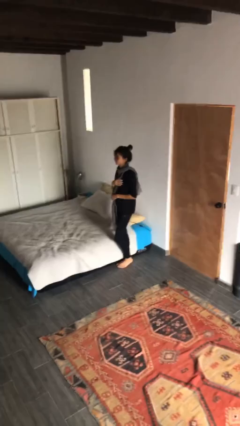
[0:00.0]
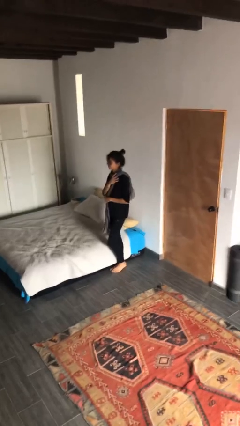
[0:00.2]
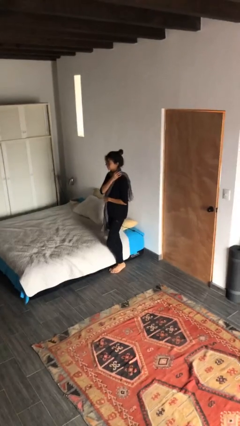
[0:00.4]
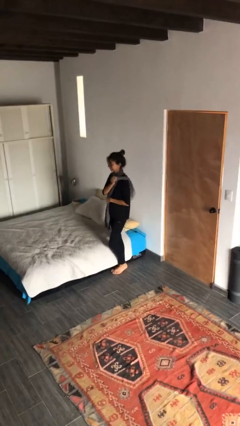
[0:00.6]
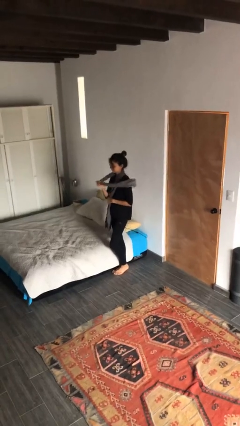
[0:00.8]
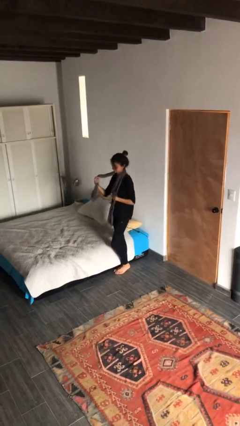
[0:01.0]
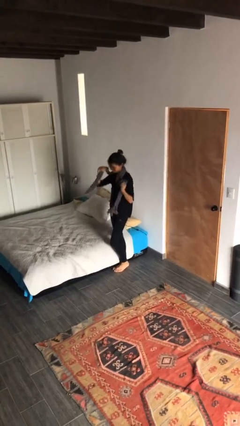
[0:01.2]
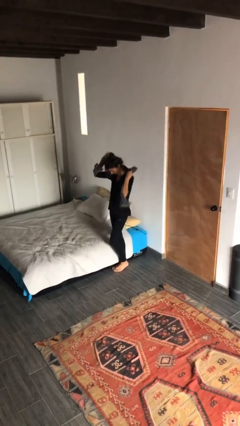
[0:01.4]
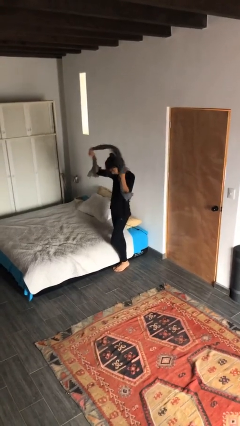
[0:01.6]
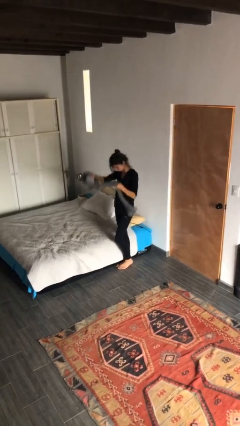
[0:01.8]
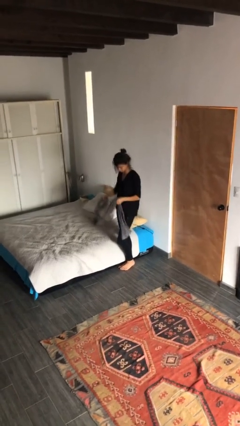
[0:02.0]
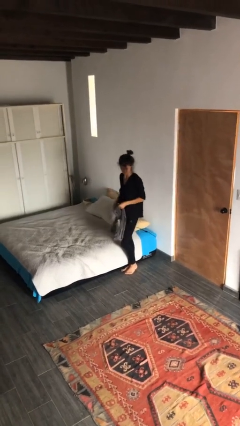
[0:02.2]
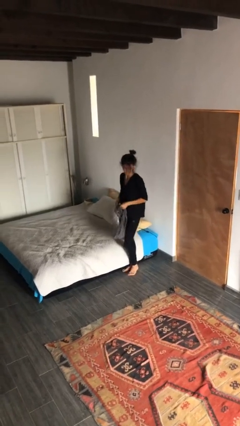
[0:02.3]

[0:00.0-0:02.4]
person takes off scarf

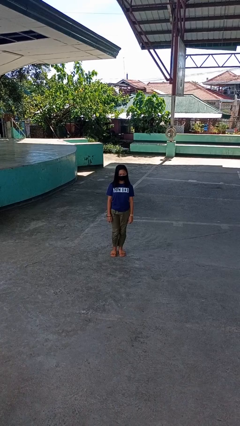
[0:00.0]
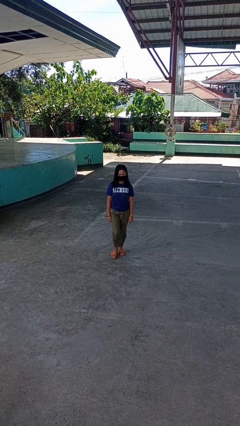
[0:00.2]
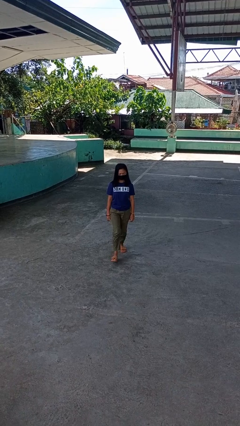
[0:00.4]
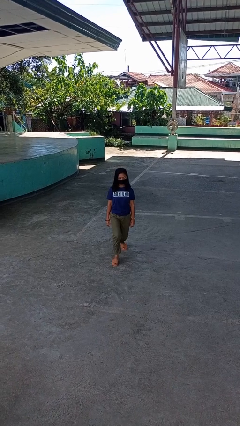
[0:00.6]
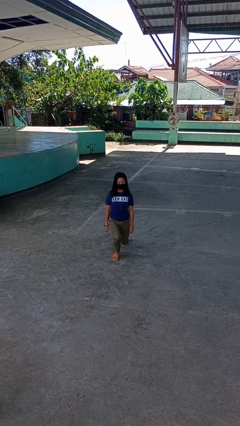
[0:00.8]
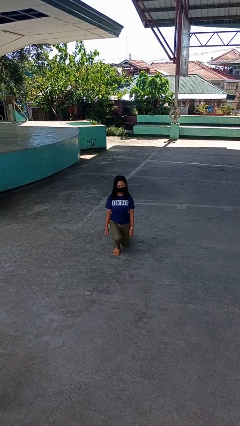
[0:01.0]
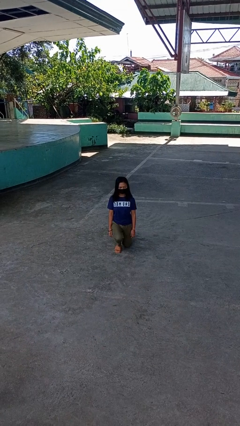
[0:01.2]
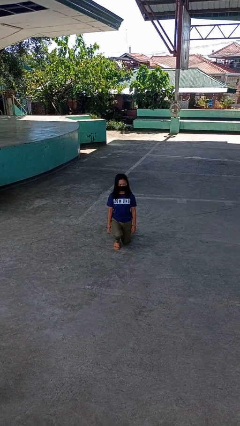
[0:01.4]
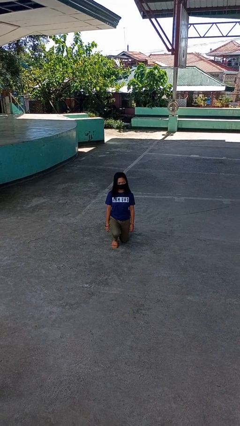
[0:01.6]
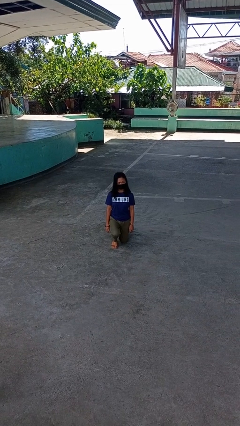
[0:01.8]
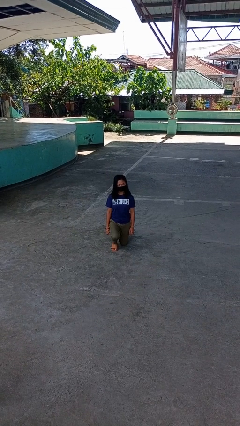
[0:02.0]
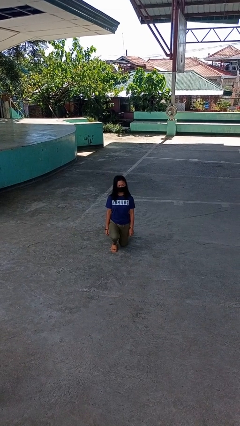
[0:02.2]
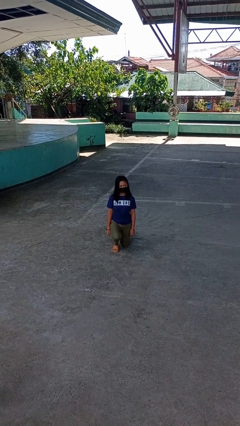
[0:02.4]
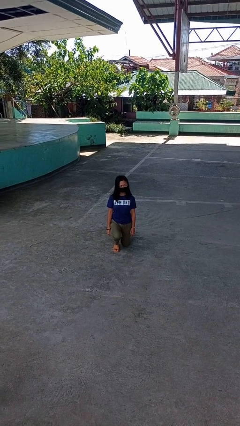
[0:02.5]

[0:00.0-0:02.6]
person kneels

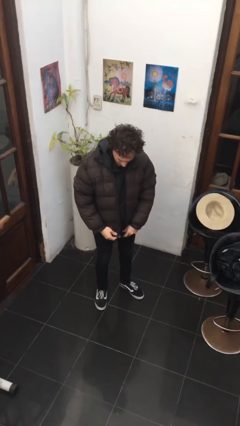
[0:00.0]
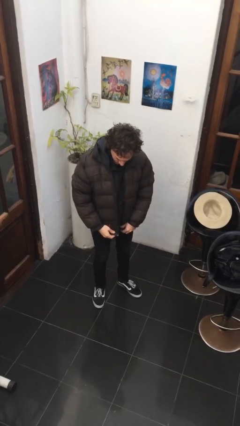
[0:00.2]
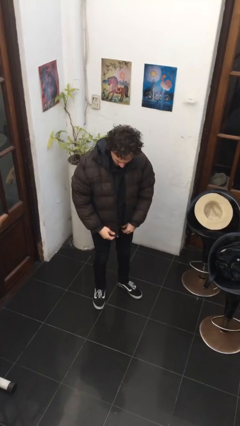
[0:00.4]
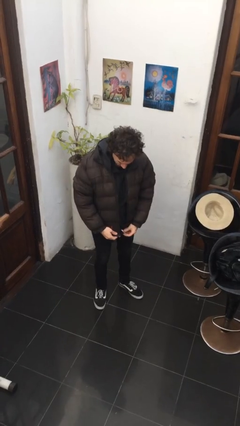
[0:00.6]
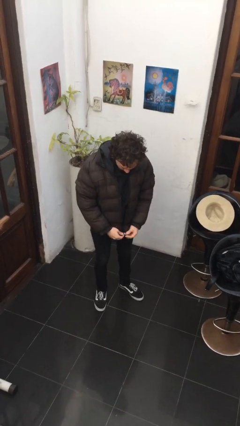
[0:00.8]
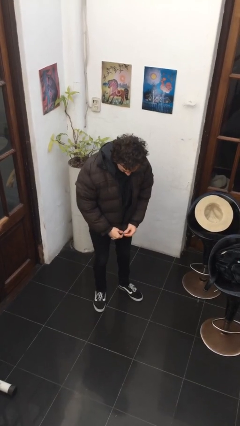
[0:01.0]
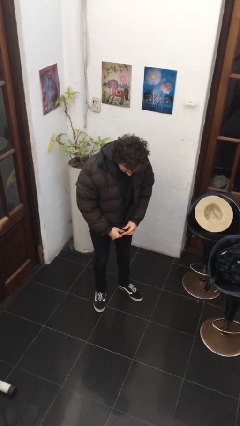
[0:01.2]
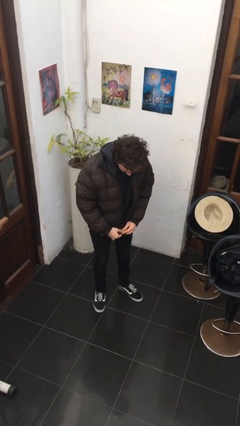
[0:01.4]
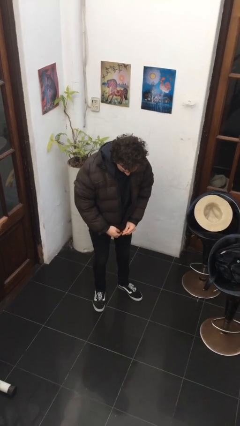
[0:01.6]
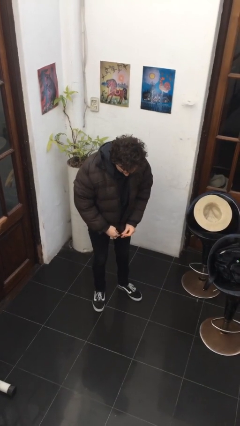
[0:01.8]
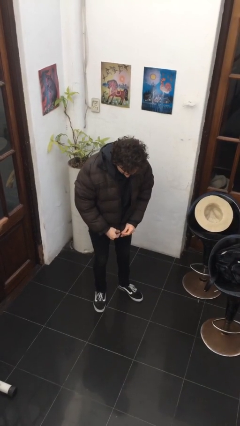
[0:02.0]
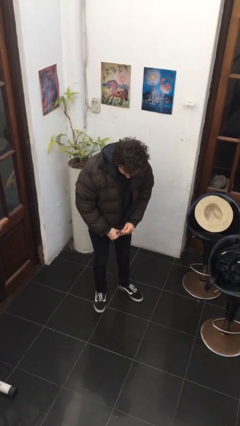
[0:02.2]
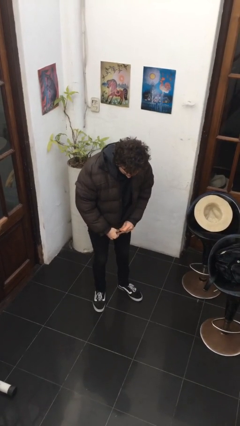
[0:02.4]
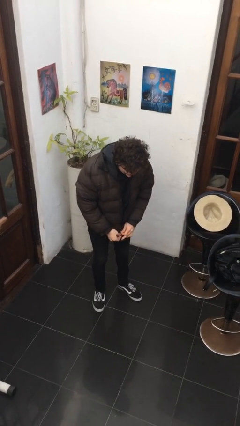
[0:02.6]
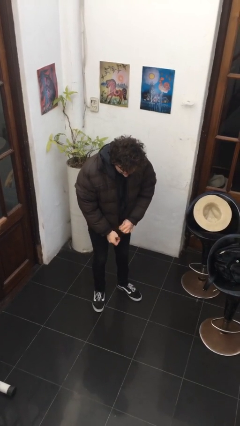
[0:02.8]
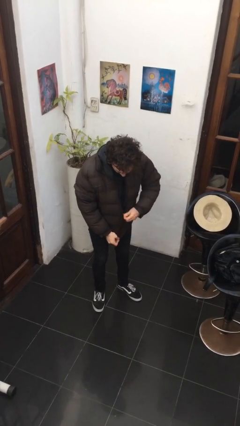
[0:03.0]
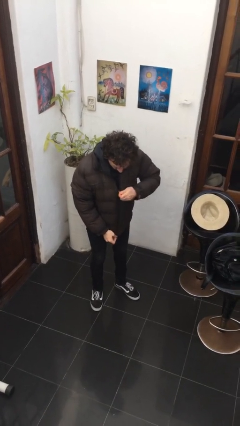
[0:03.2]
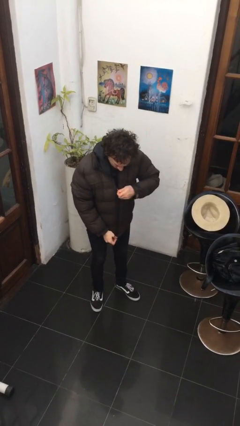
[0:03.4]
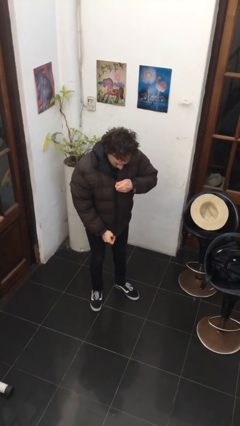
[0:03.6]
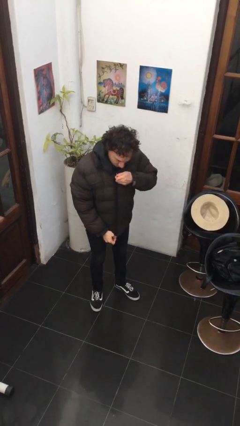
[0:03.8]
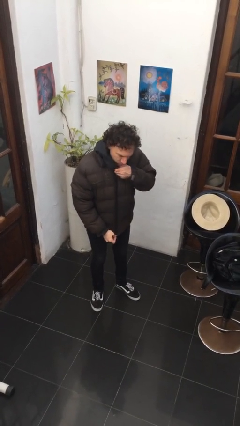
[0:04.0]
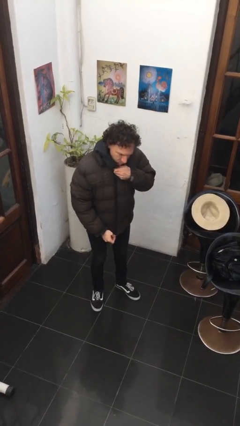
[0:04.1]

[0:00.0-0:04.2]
person zips up jacket

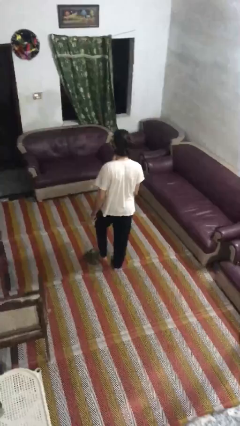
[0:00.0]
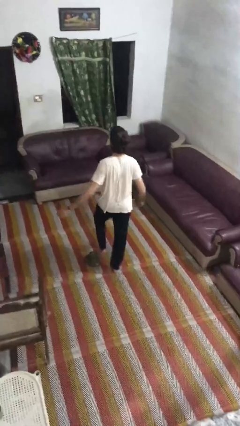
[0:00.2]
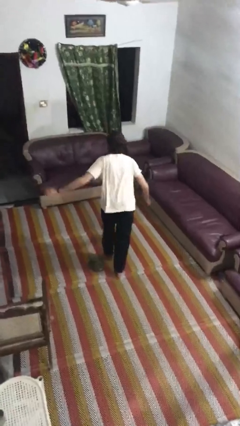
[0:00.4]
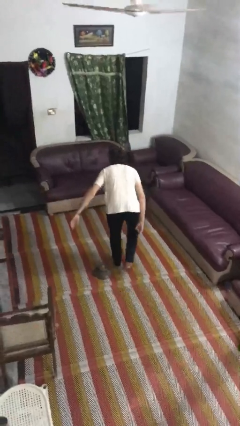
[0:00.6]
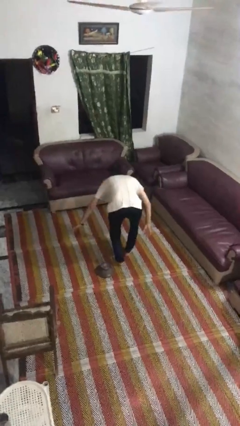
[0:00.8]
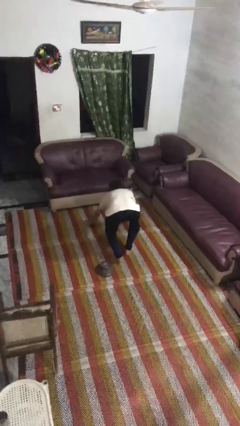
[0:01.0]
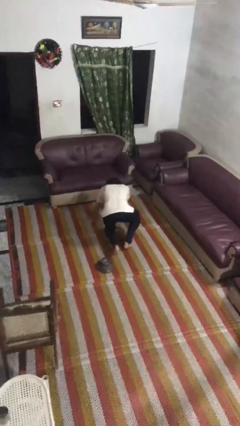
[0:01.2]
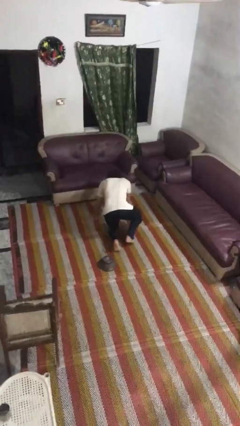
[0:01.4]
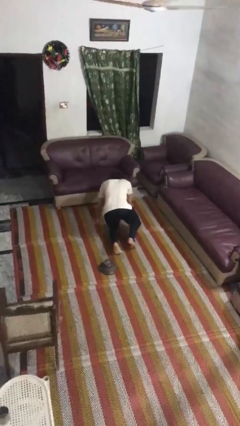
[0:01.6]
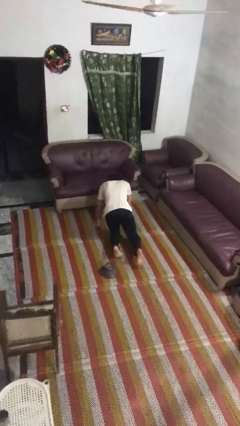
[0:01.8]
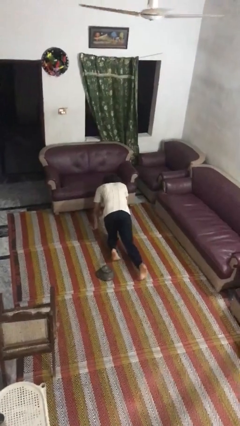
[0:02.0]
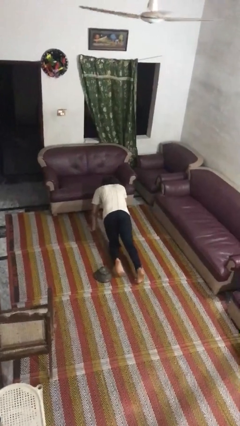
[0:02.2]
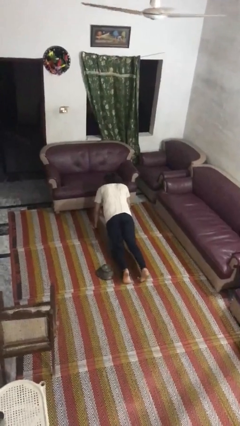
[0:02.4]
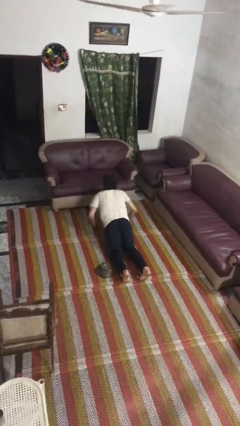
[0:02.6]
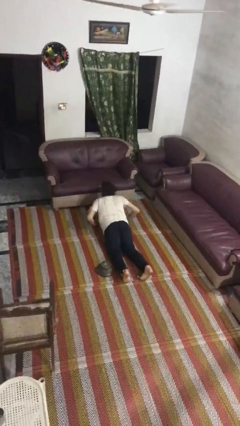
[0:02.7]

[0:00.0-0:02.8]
person trips on object on floor

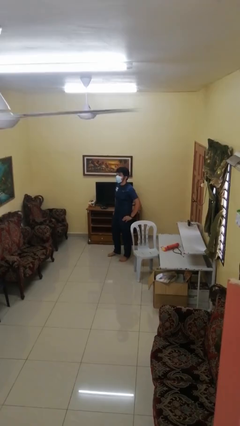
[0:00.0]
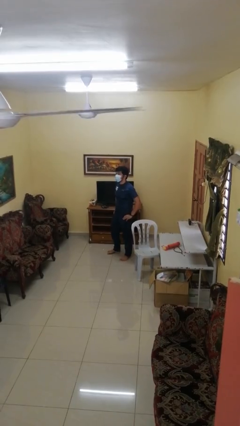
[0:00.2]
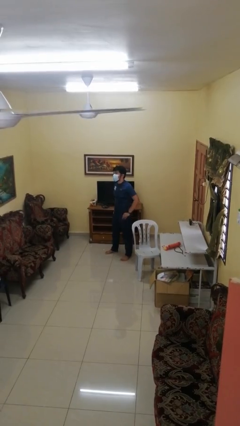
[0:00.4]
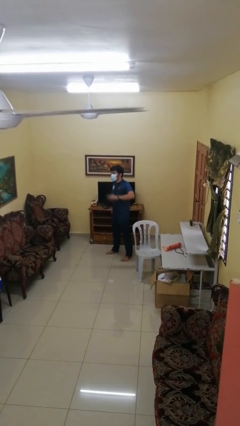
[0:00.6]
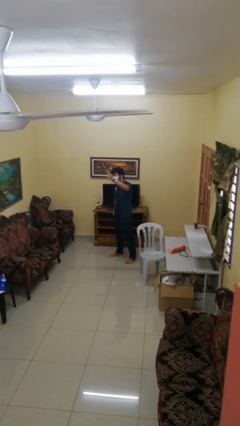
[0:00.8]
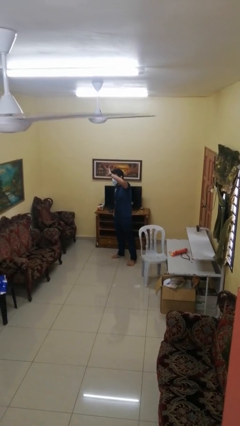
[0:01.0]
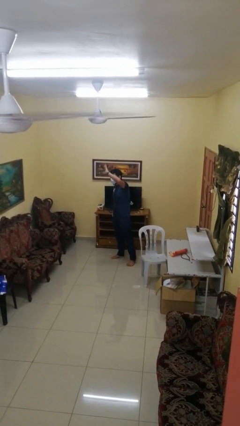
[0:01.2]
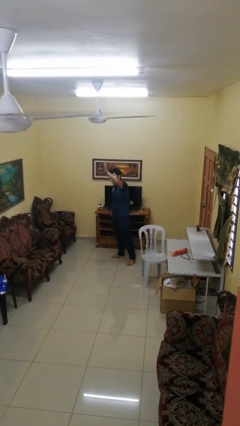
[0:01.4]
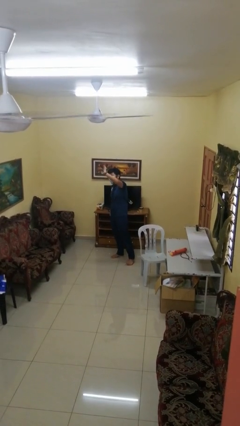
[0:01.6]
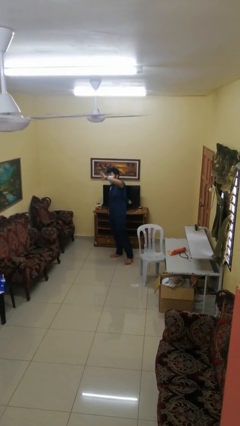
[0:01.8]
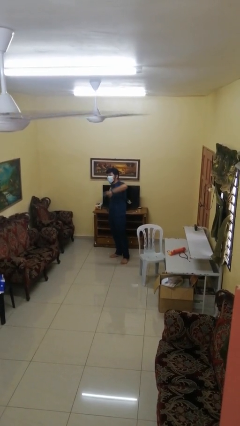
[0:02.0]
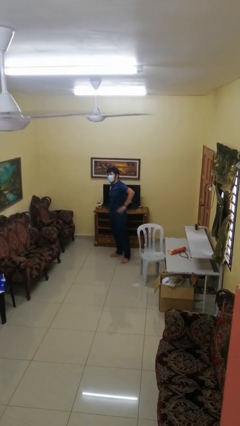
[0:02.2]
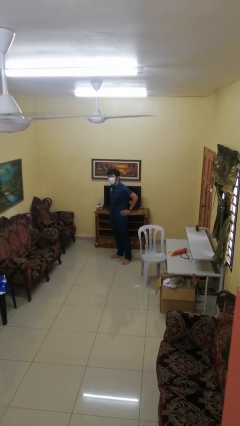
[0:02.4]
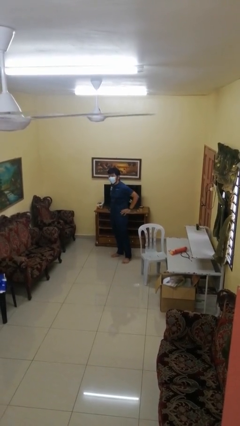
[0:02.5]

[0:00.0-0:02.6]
person waves at person

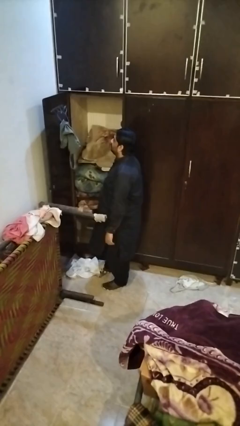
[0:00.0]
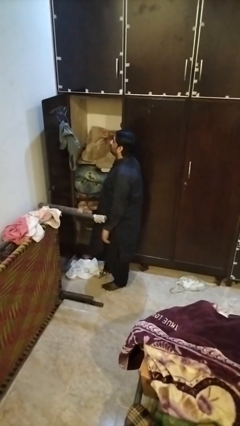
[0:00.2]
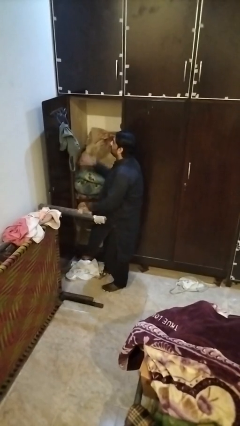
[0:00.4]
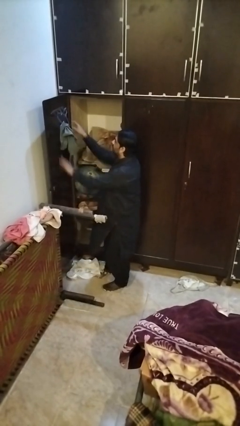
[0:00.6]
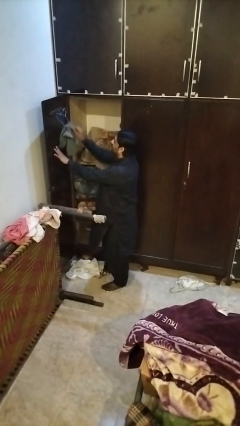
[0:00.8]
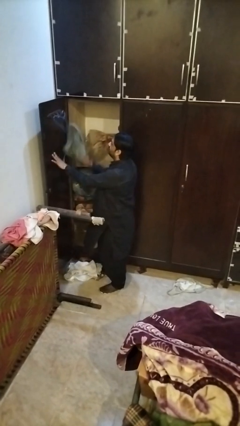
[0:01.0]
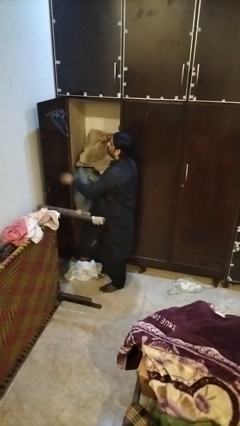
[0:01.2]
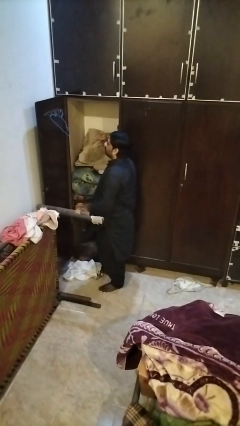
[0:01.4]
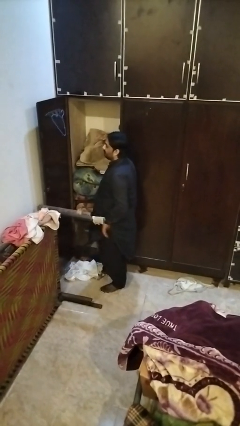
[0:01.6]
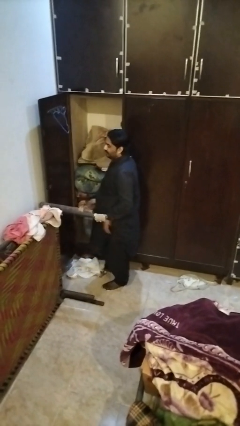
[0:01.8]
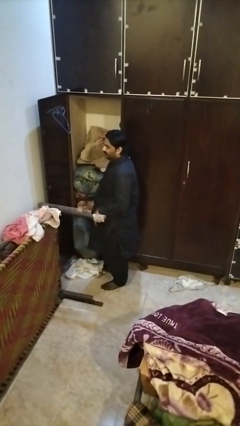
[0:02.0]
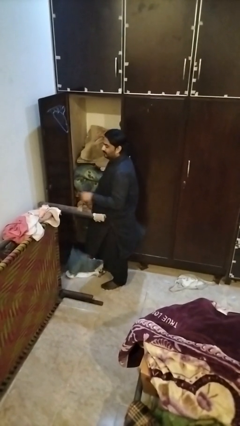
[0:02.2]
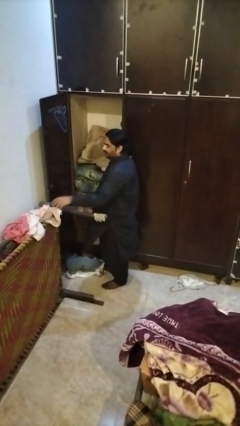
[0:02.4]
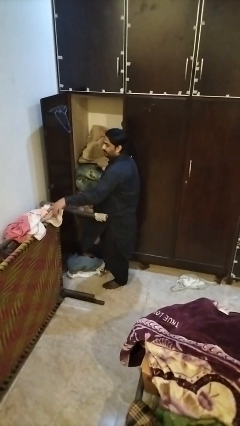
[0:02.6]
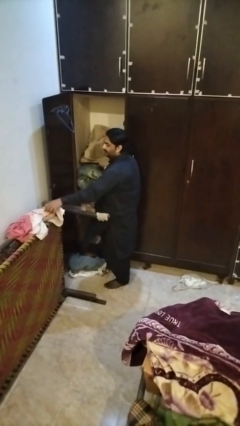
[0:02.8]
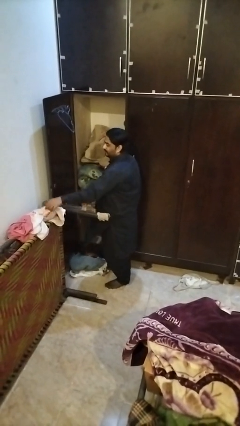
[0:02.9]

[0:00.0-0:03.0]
person takes clothes from closet
